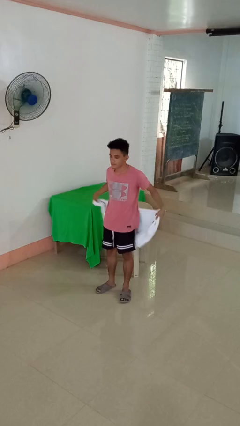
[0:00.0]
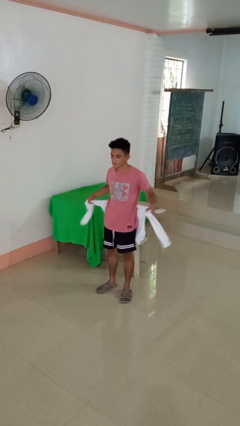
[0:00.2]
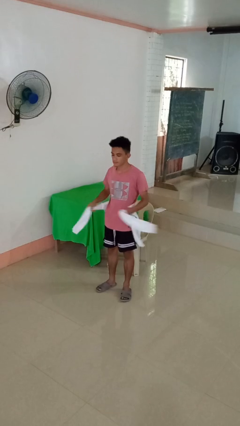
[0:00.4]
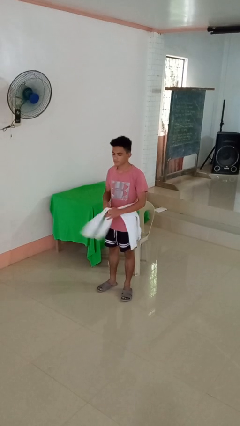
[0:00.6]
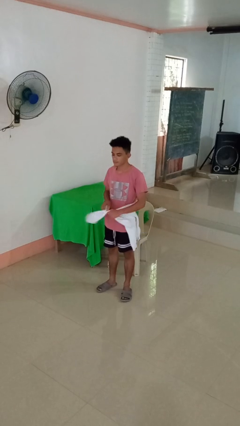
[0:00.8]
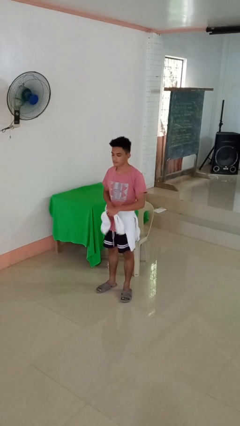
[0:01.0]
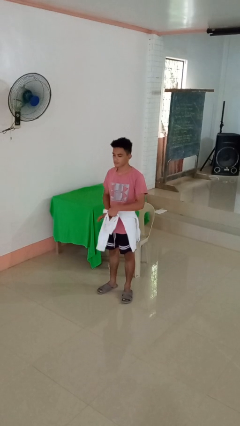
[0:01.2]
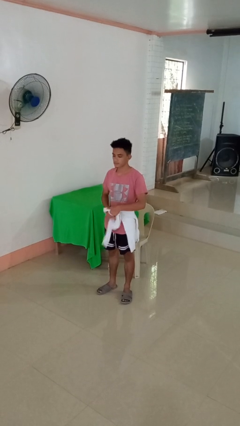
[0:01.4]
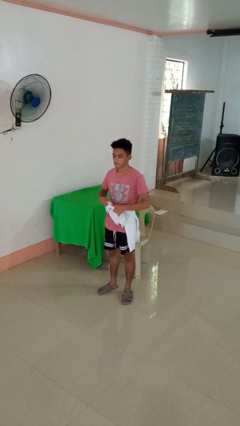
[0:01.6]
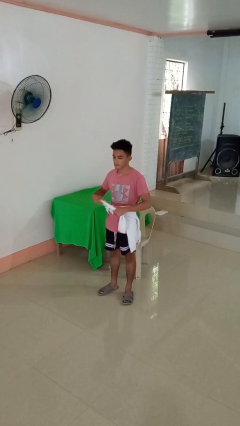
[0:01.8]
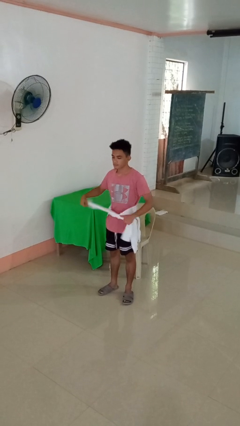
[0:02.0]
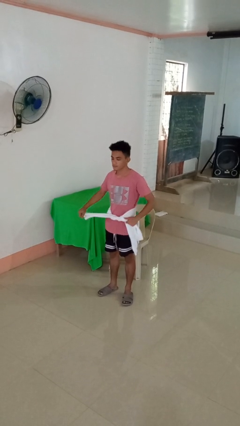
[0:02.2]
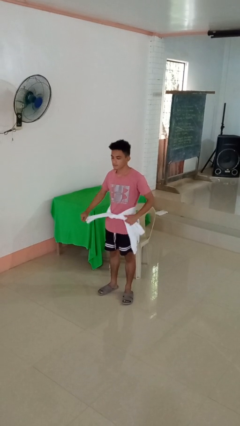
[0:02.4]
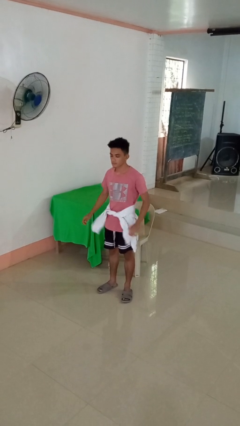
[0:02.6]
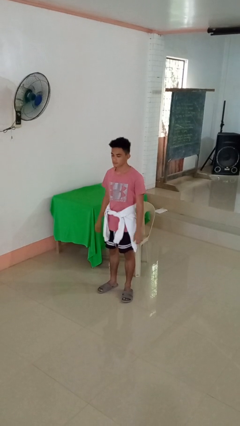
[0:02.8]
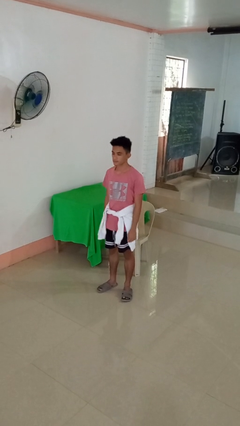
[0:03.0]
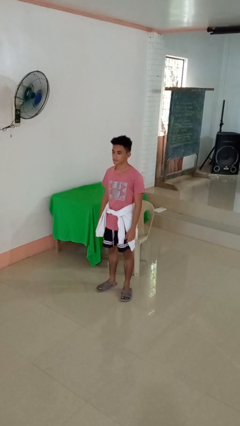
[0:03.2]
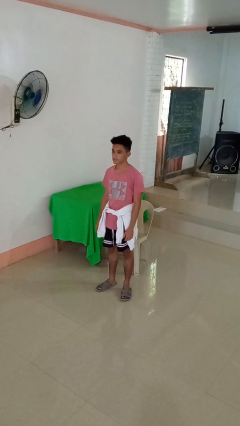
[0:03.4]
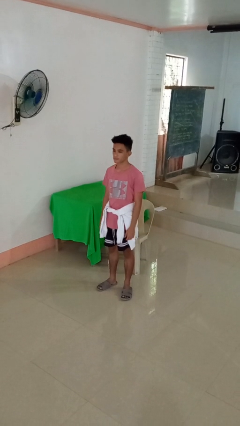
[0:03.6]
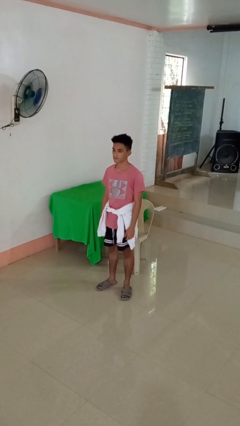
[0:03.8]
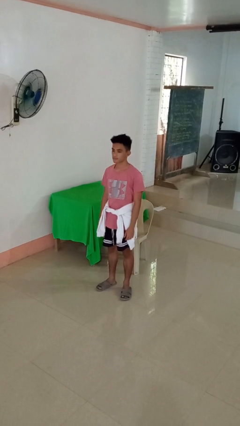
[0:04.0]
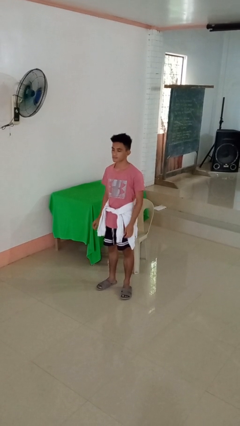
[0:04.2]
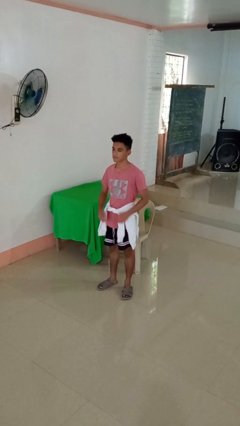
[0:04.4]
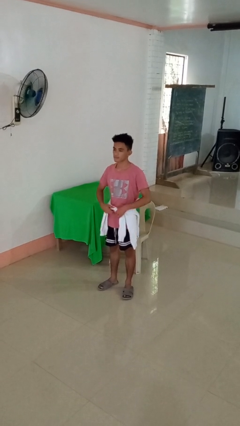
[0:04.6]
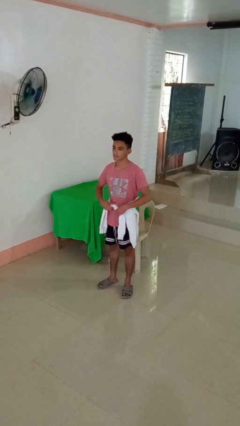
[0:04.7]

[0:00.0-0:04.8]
person ties jacket around waist

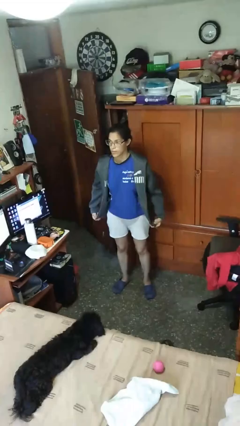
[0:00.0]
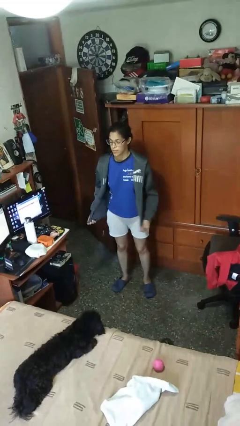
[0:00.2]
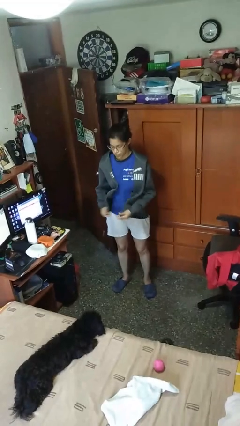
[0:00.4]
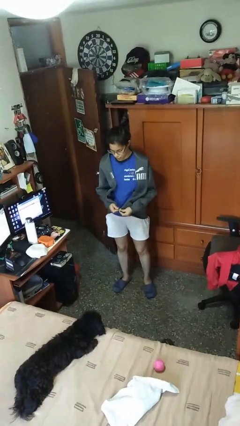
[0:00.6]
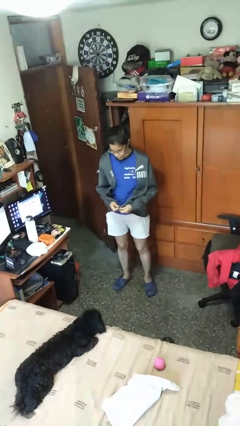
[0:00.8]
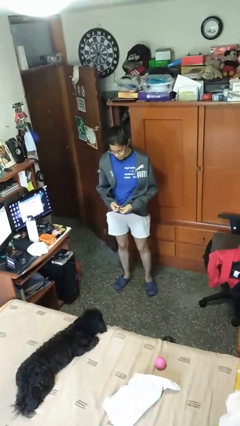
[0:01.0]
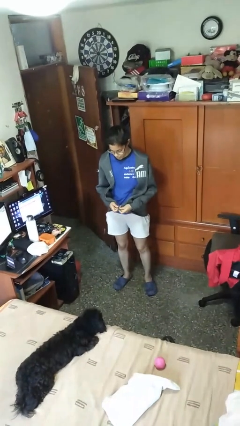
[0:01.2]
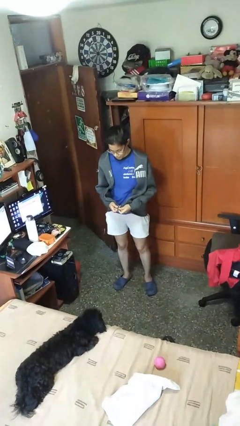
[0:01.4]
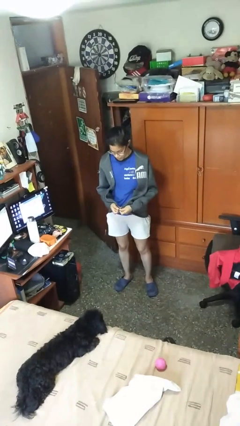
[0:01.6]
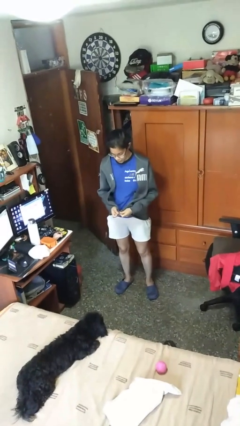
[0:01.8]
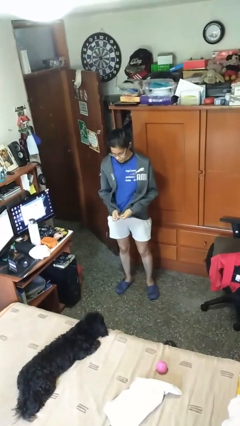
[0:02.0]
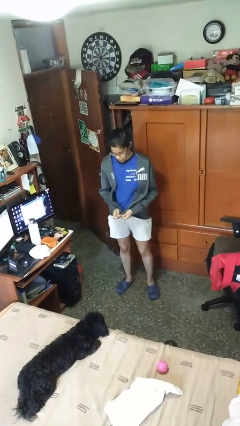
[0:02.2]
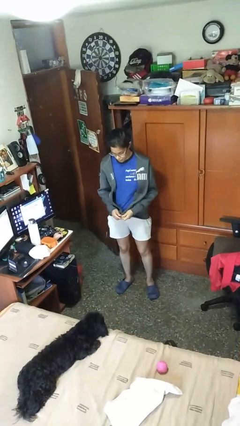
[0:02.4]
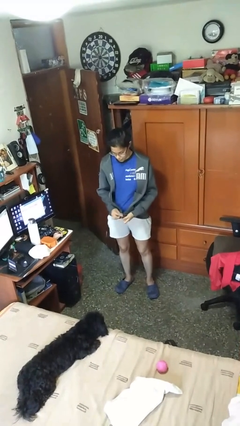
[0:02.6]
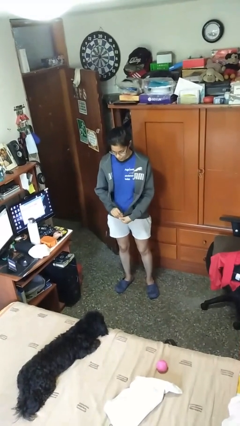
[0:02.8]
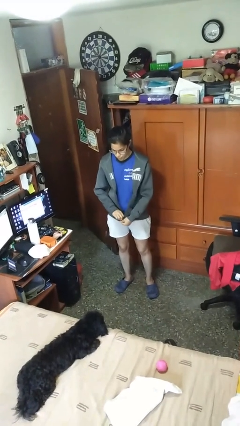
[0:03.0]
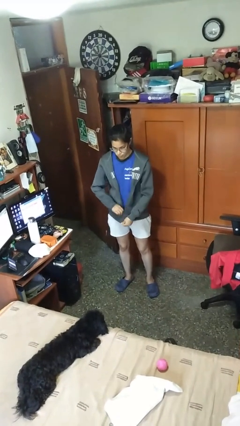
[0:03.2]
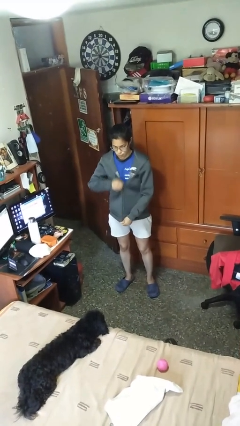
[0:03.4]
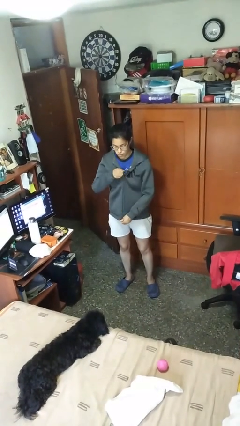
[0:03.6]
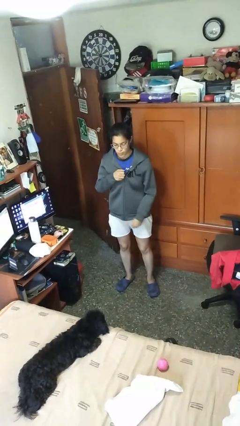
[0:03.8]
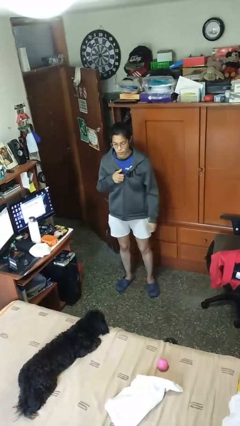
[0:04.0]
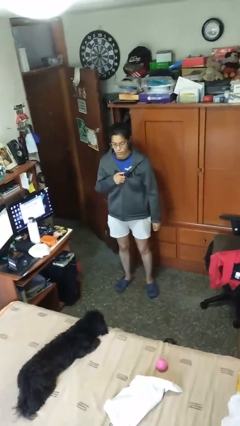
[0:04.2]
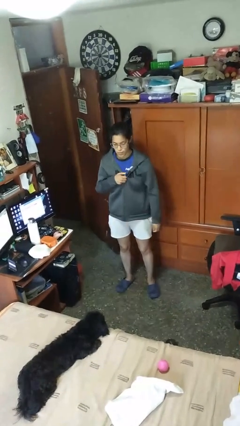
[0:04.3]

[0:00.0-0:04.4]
person zips up jacket

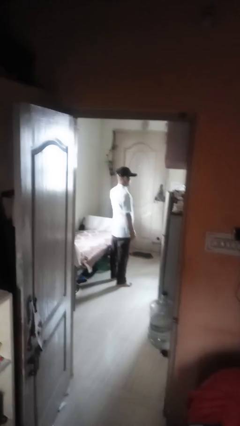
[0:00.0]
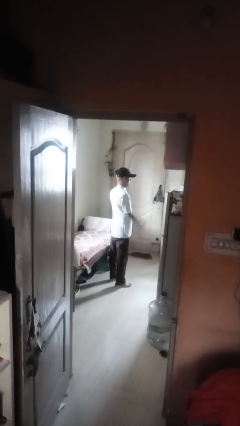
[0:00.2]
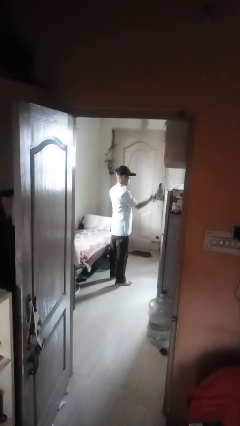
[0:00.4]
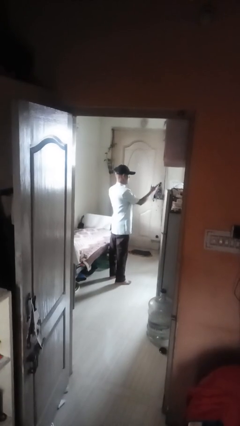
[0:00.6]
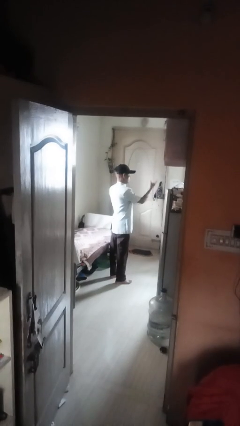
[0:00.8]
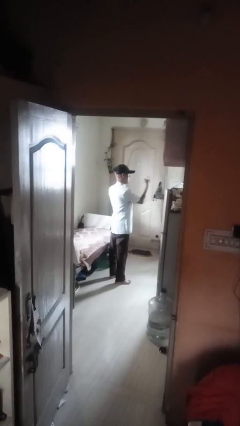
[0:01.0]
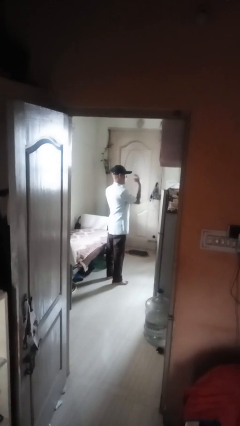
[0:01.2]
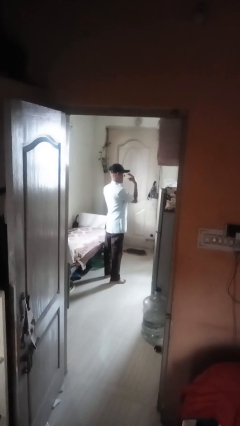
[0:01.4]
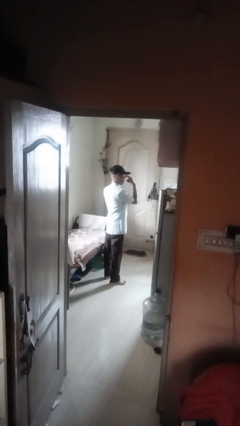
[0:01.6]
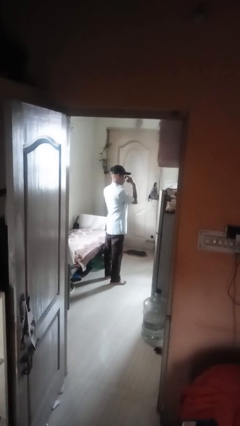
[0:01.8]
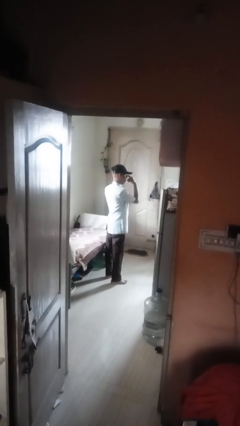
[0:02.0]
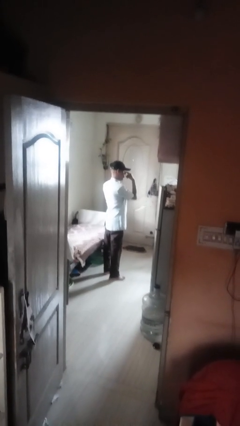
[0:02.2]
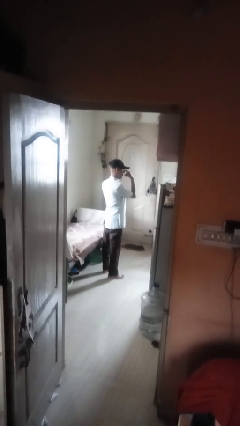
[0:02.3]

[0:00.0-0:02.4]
person gestures watch closely

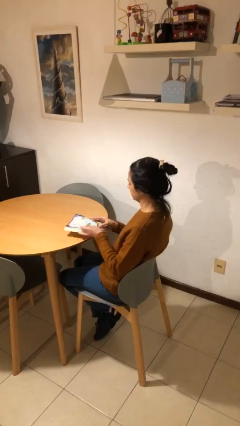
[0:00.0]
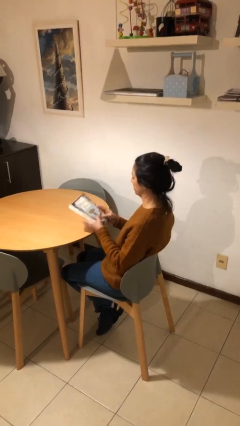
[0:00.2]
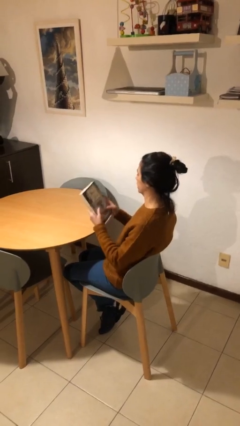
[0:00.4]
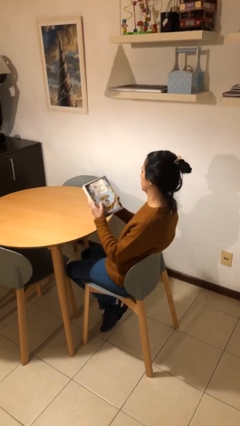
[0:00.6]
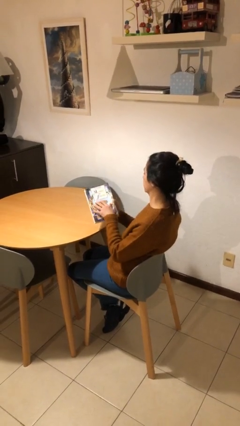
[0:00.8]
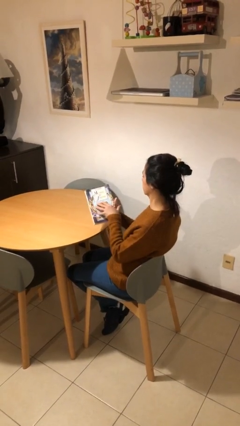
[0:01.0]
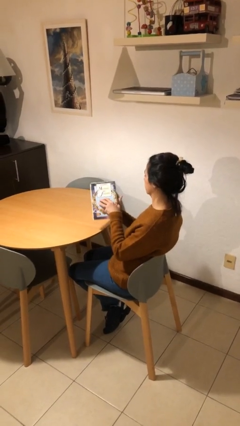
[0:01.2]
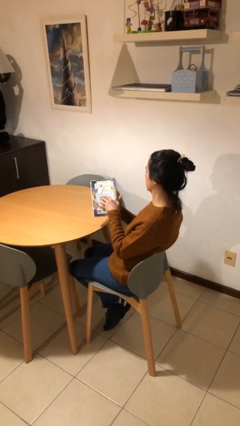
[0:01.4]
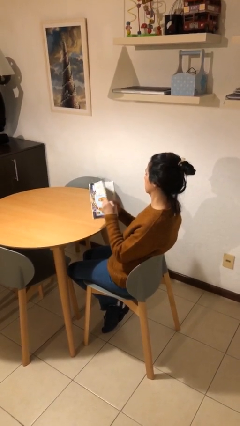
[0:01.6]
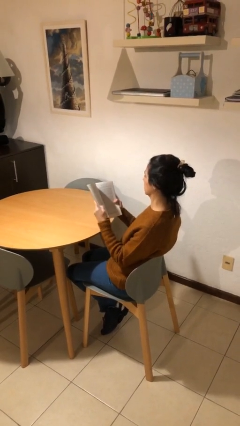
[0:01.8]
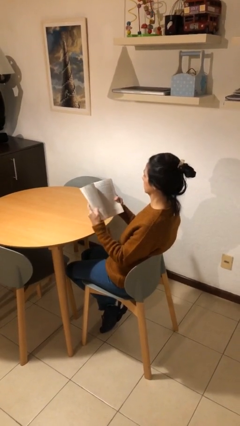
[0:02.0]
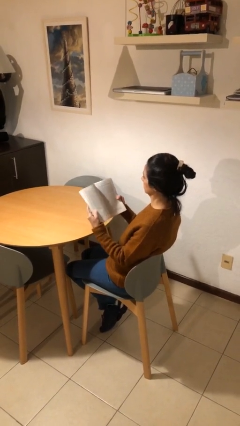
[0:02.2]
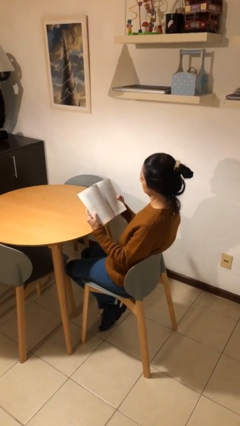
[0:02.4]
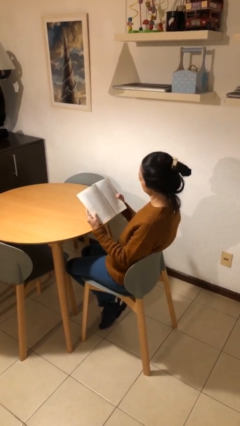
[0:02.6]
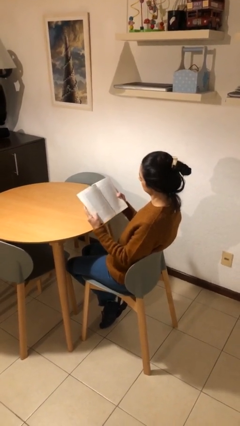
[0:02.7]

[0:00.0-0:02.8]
person picks up object from table

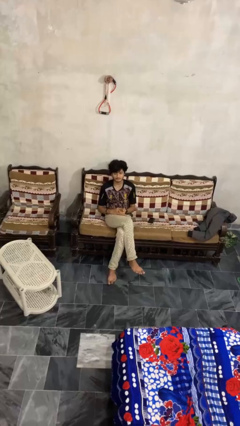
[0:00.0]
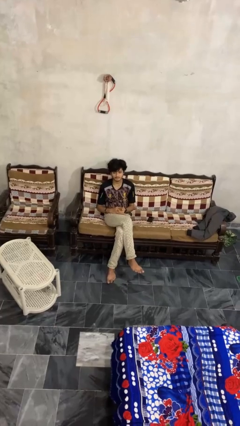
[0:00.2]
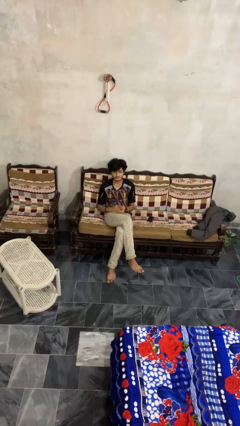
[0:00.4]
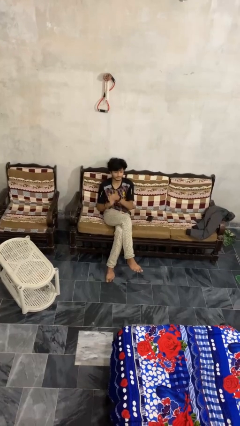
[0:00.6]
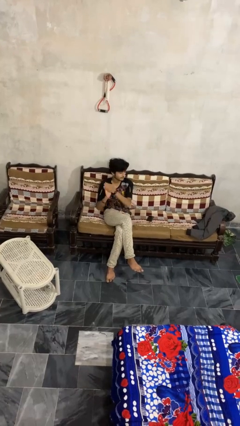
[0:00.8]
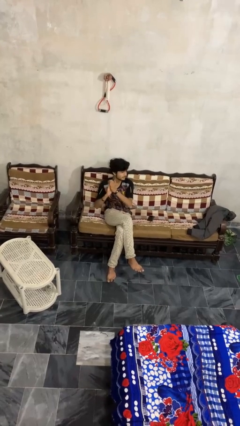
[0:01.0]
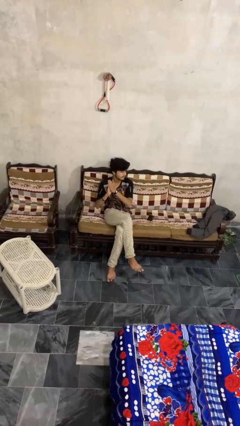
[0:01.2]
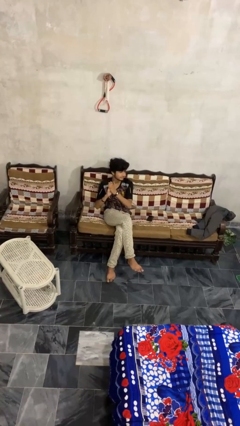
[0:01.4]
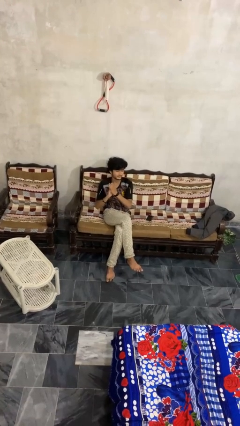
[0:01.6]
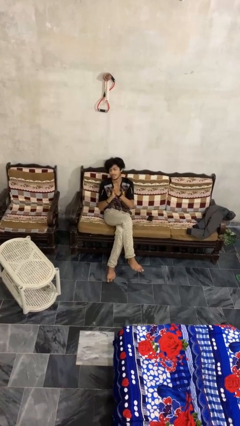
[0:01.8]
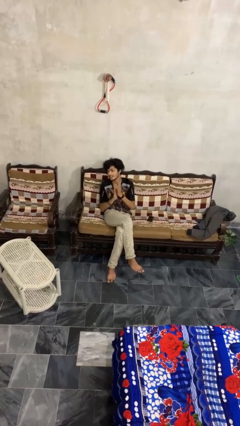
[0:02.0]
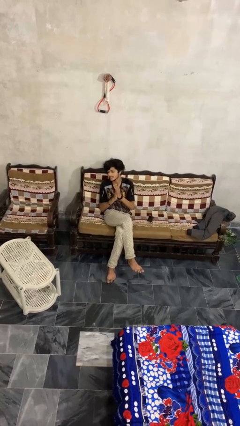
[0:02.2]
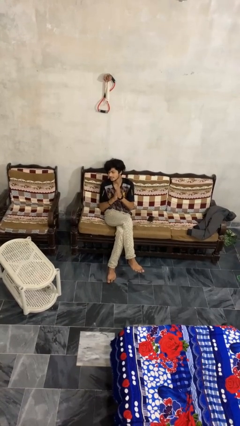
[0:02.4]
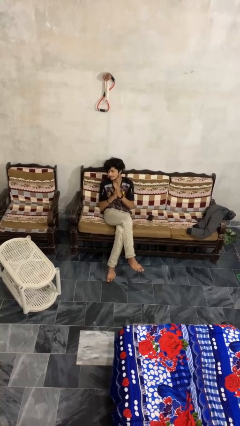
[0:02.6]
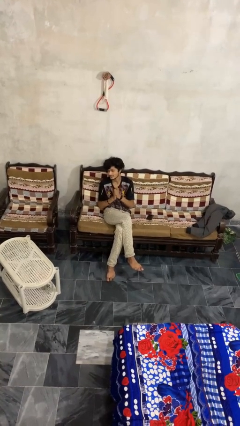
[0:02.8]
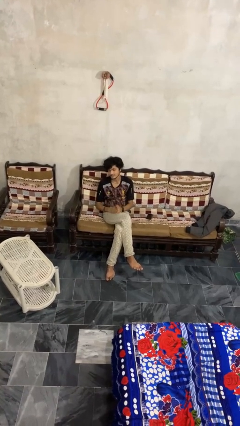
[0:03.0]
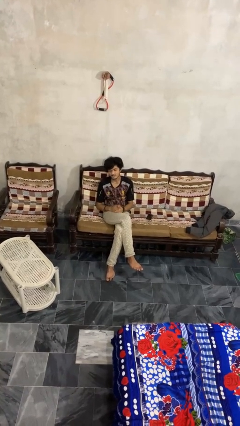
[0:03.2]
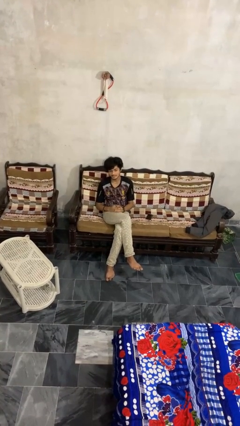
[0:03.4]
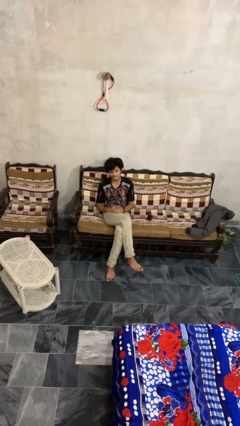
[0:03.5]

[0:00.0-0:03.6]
person claps hands

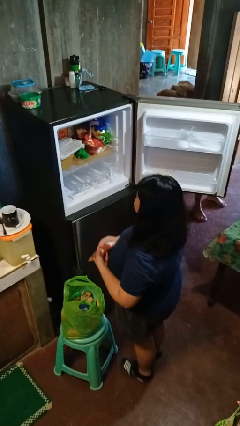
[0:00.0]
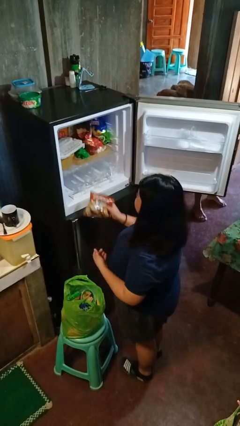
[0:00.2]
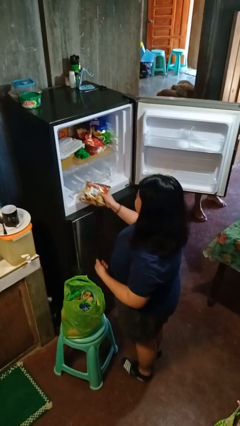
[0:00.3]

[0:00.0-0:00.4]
person loads groceries into refrigerator
